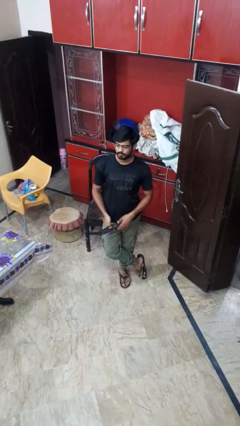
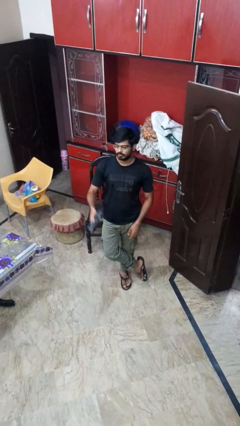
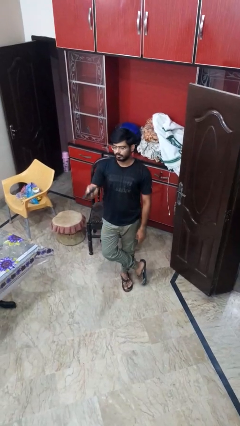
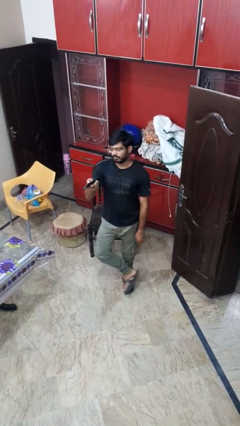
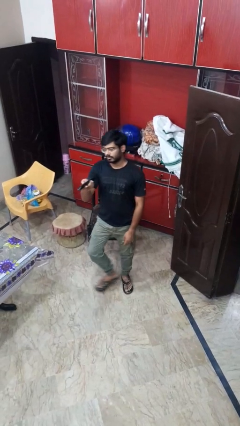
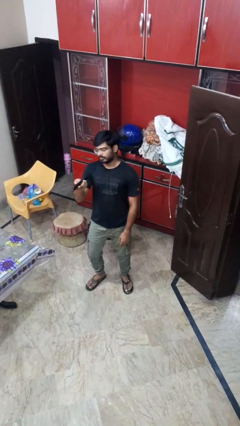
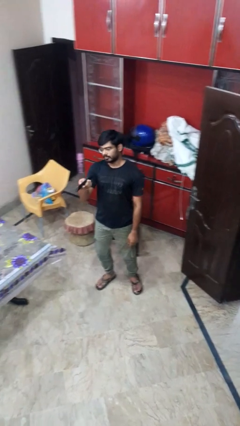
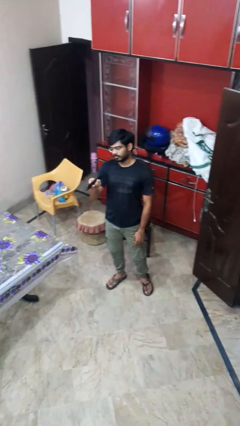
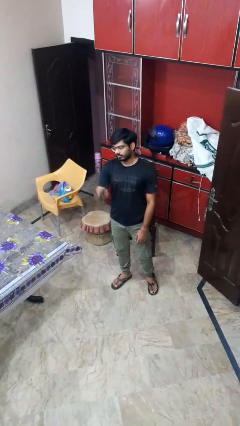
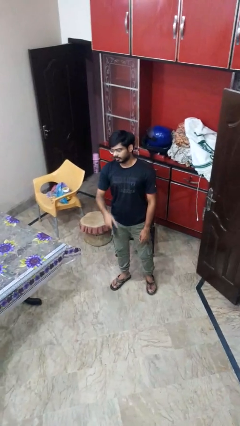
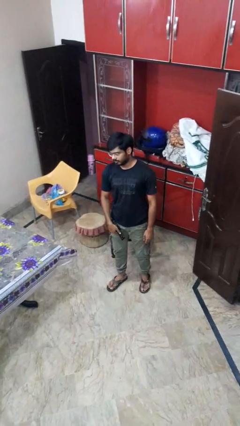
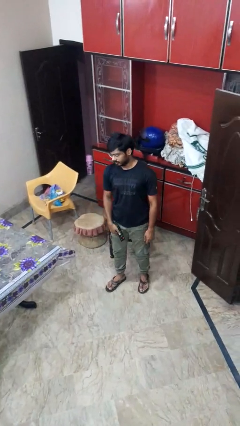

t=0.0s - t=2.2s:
person uses television remote

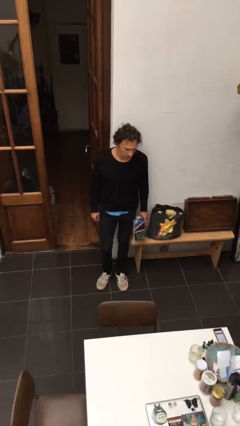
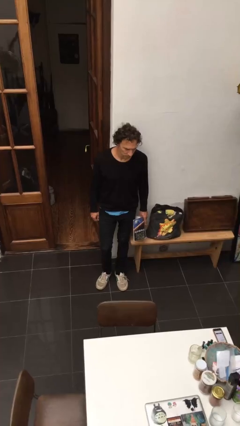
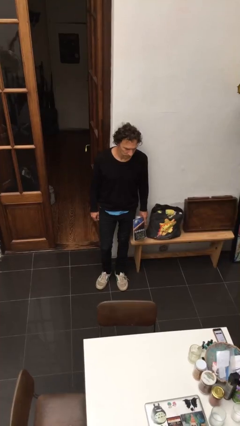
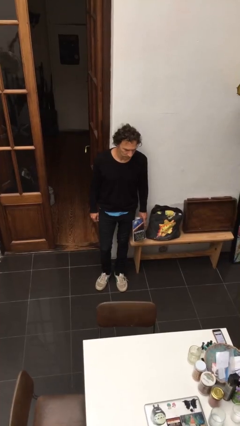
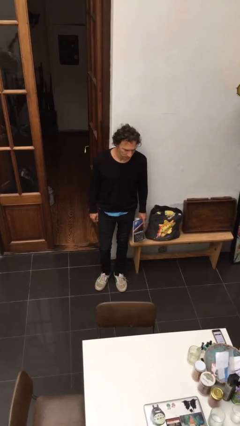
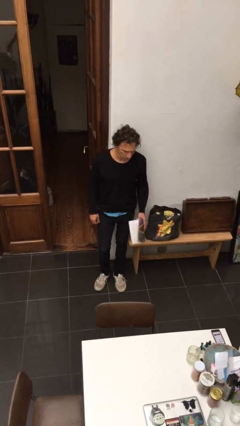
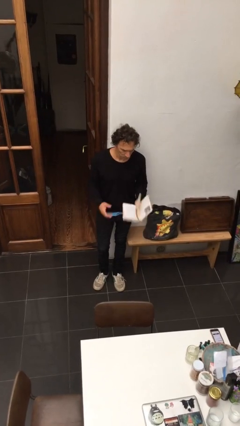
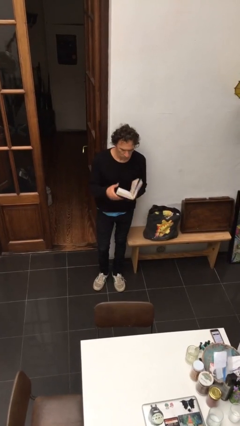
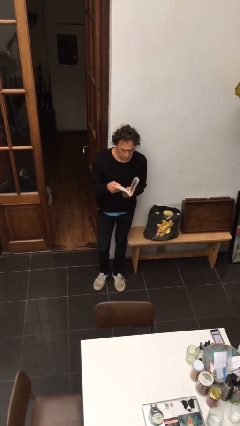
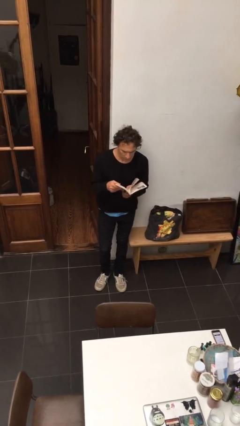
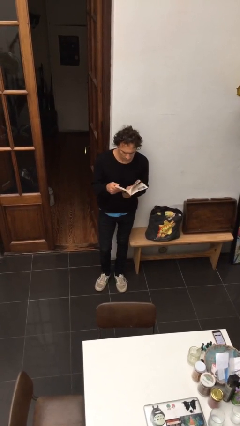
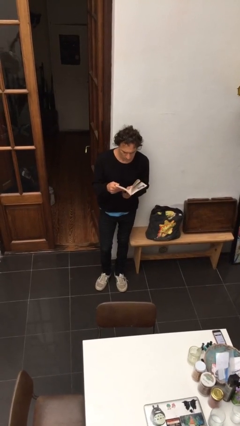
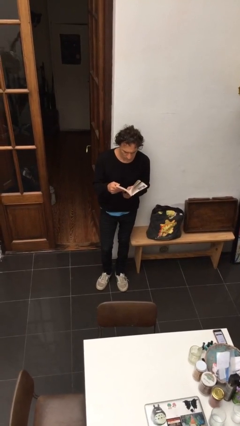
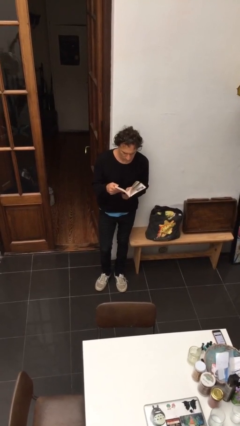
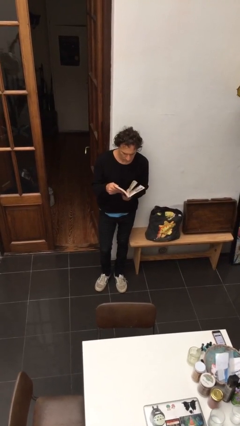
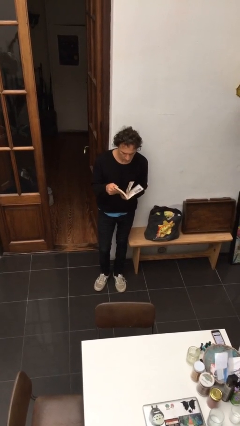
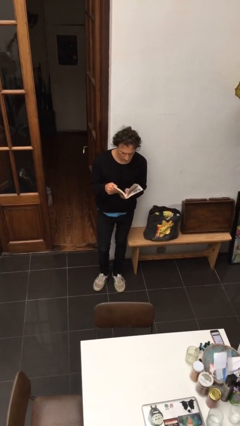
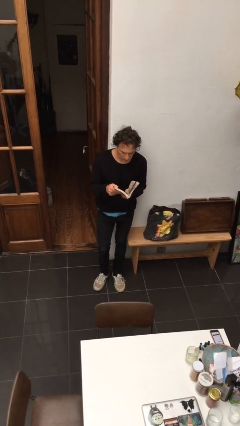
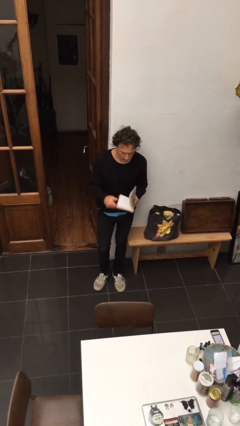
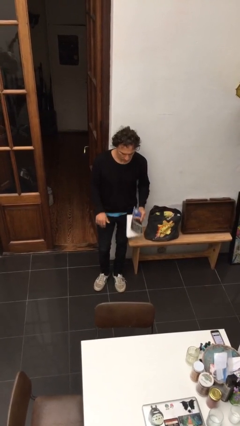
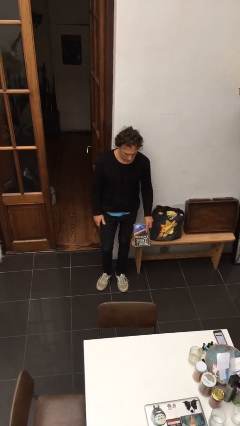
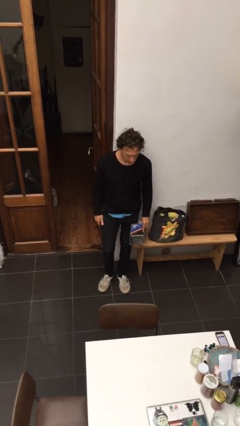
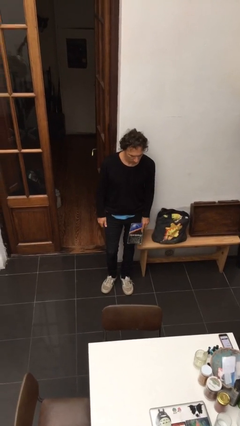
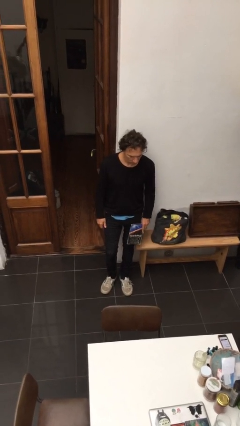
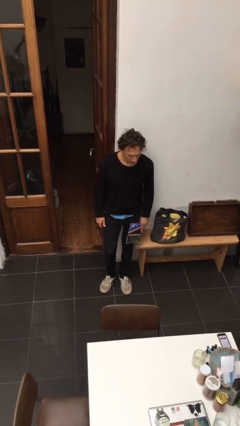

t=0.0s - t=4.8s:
person reads document

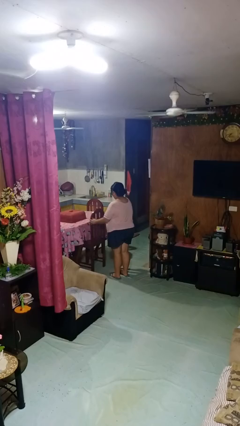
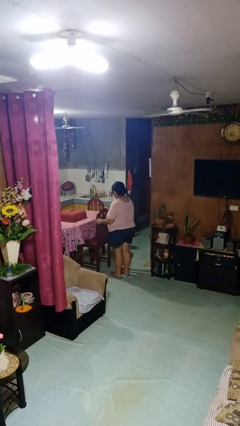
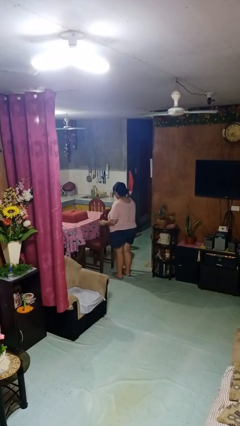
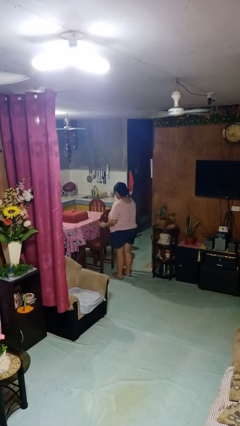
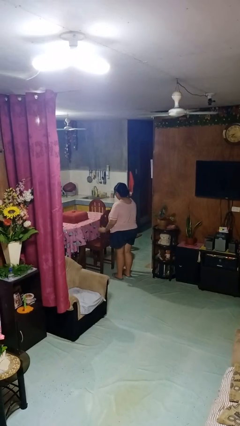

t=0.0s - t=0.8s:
person pulls out chair

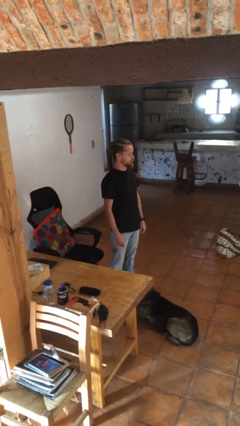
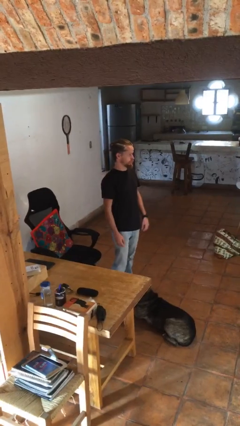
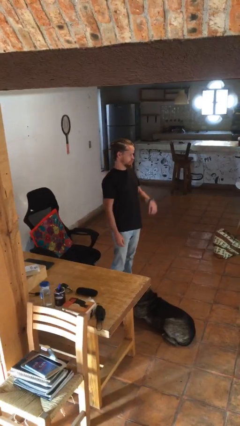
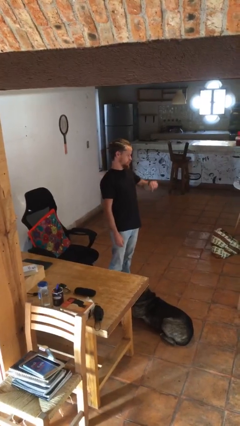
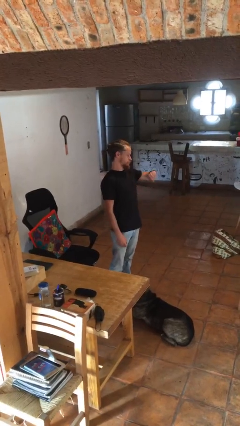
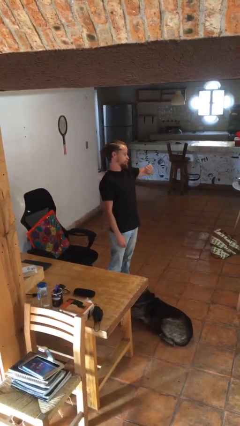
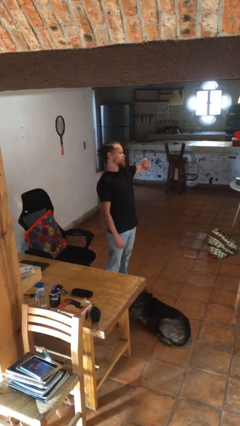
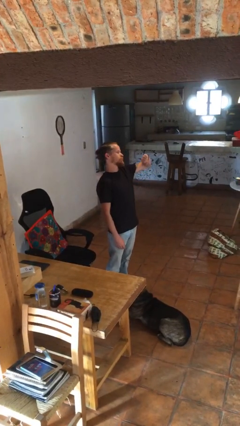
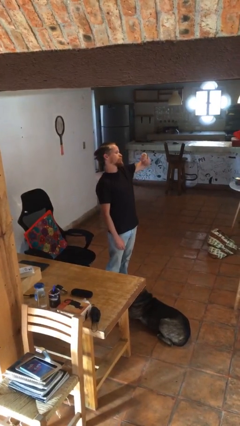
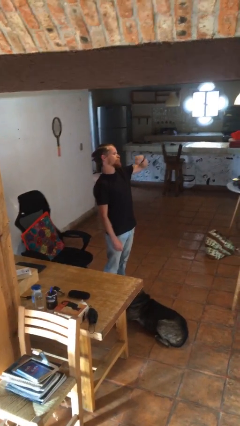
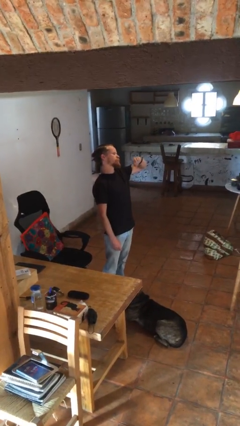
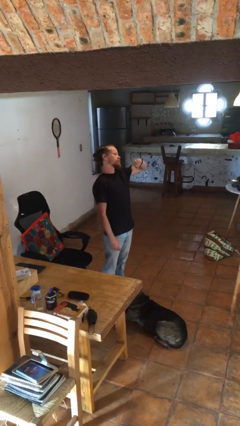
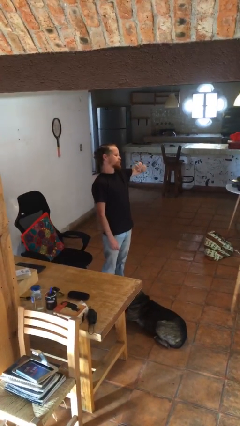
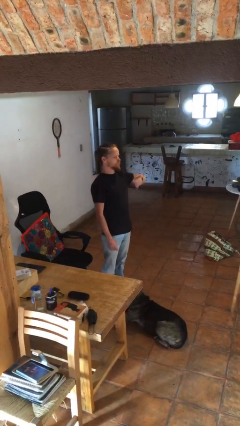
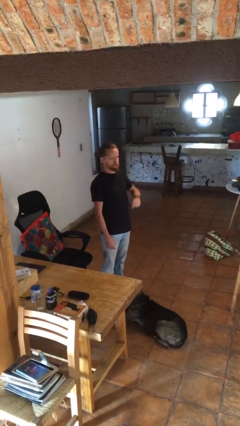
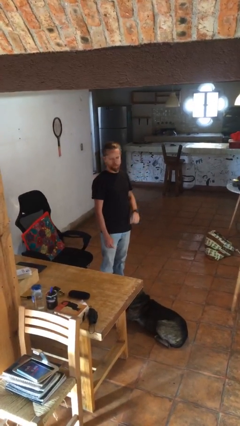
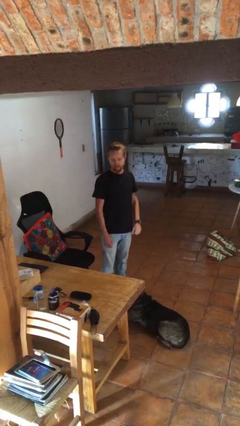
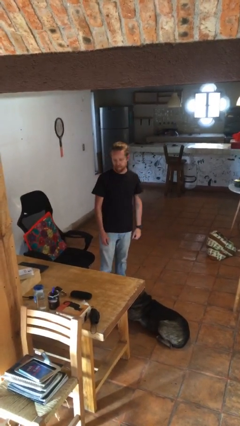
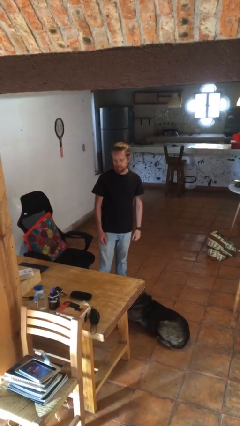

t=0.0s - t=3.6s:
person looks at wristwatch

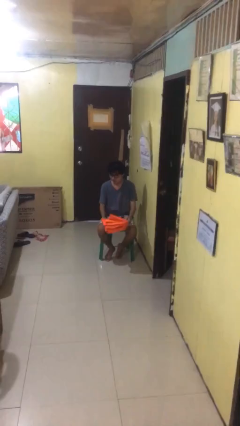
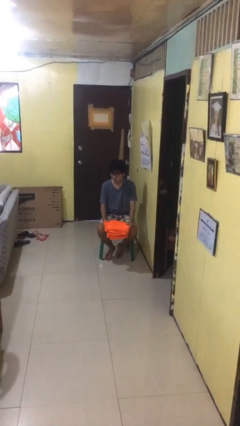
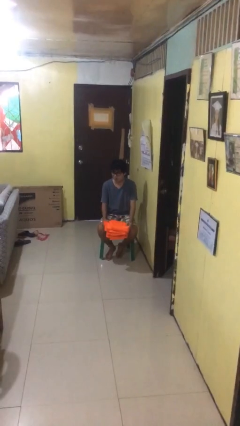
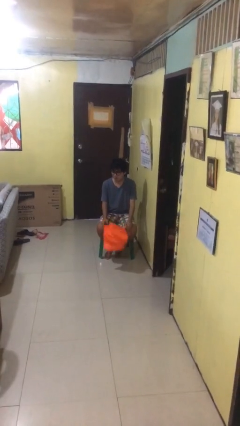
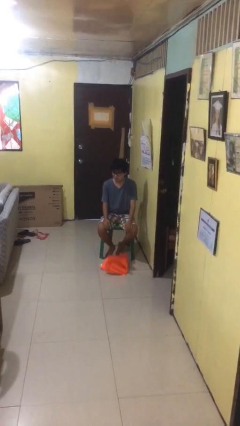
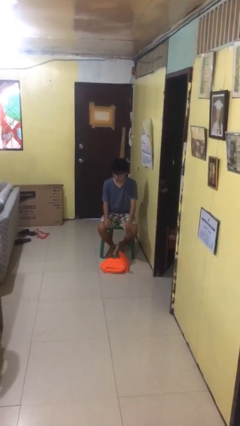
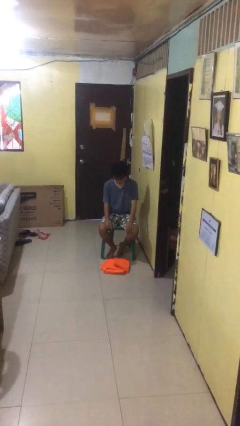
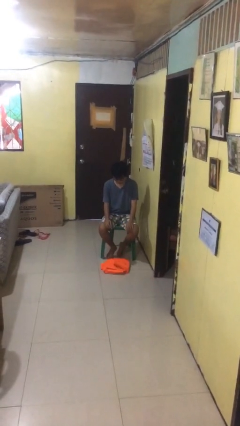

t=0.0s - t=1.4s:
person drops object

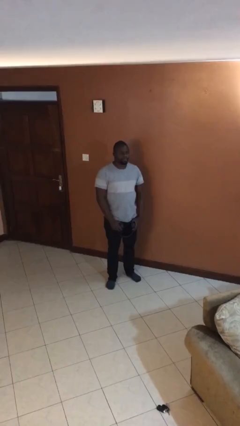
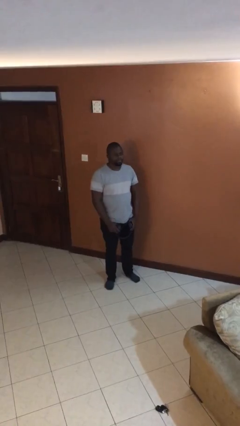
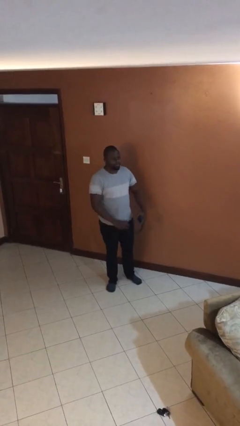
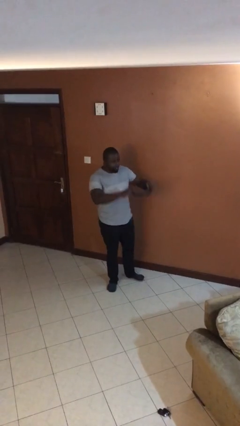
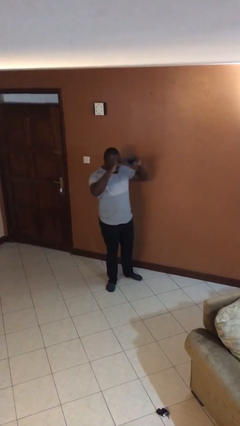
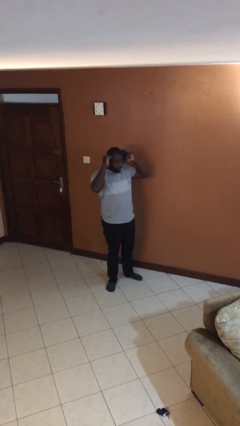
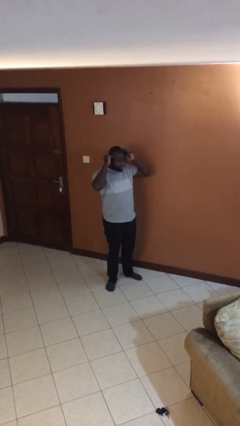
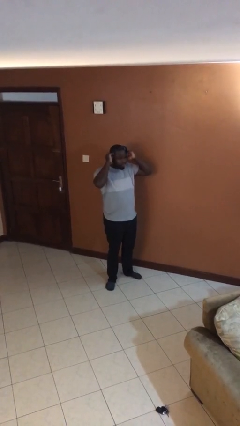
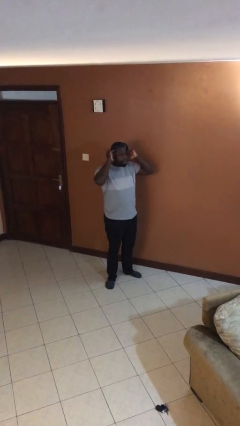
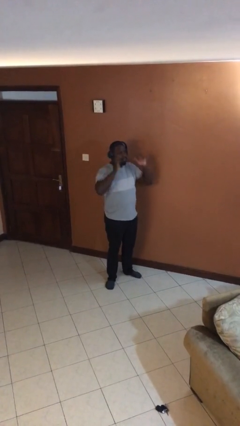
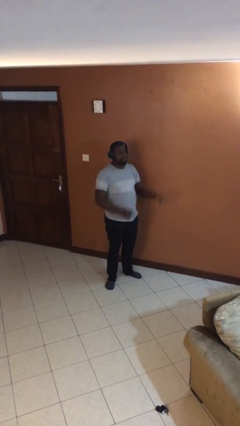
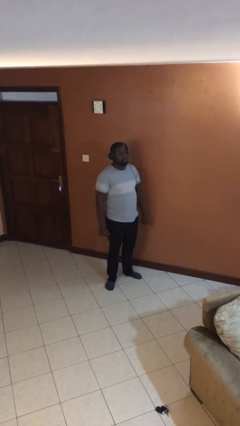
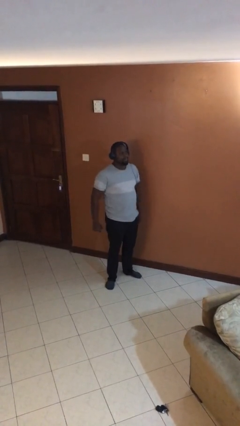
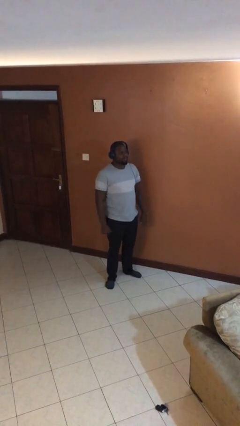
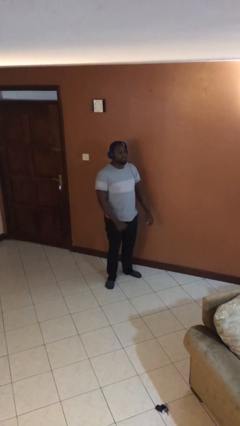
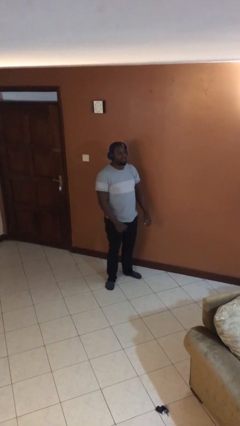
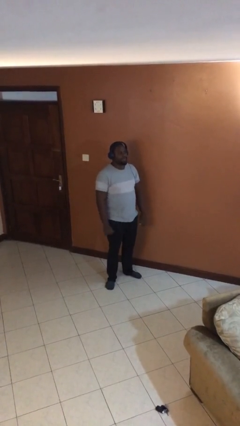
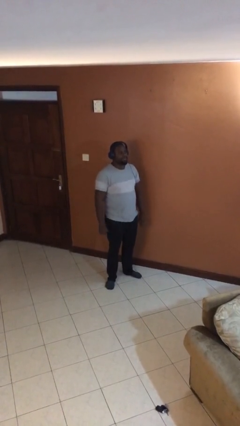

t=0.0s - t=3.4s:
person puts on headphones

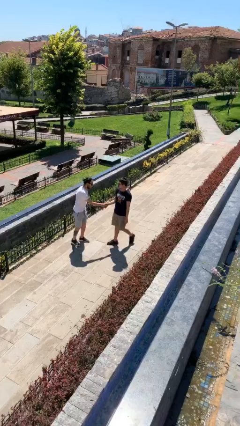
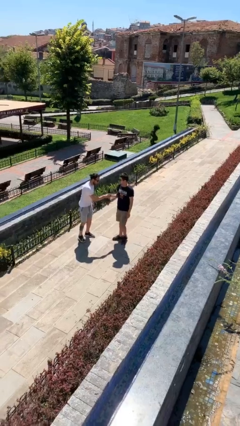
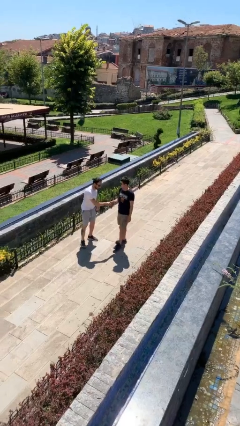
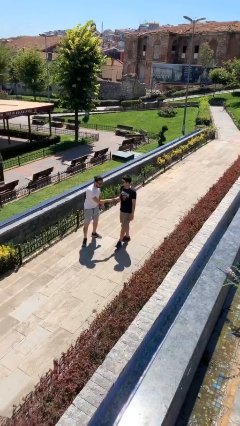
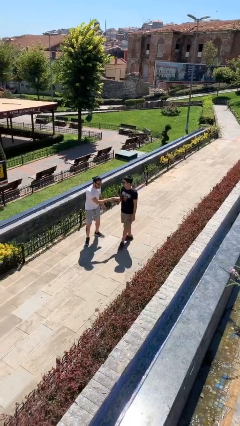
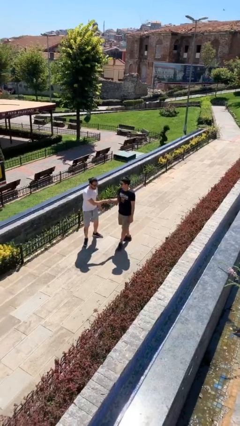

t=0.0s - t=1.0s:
person shakes hand
